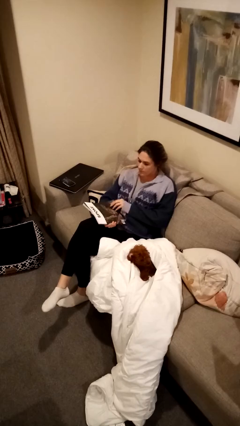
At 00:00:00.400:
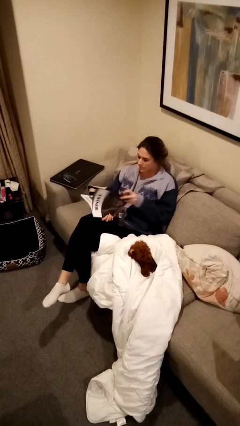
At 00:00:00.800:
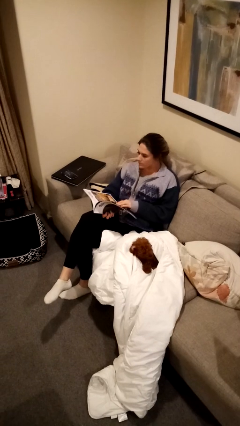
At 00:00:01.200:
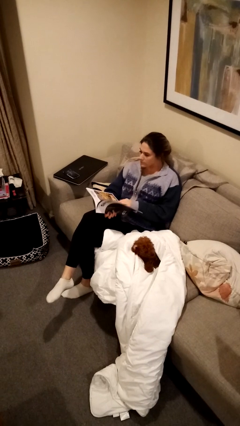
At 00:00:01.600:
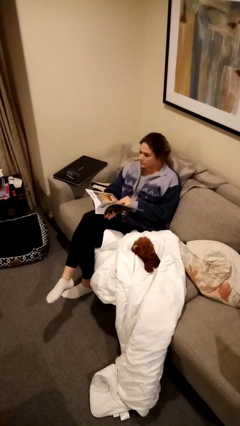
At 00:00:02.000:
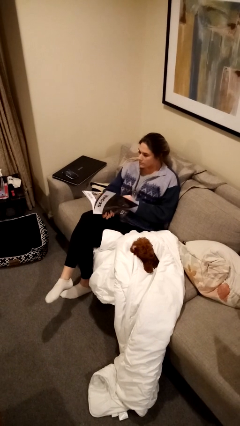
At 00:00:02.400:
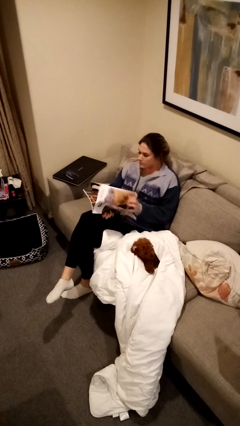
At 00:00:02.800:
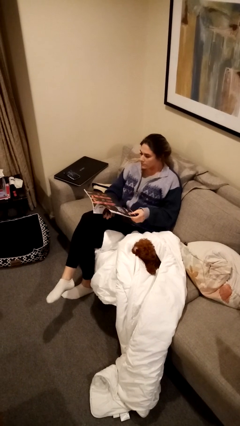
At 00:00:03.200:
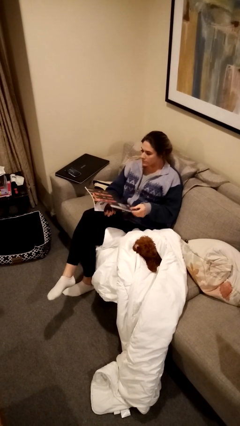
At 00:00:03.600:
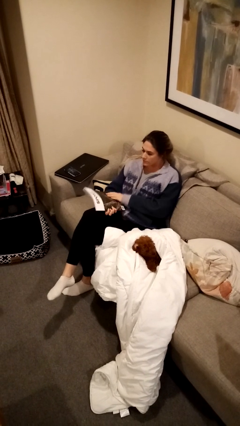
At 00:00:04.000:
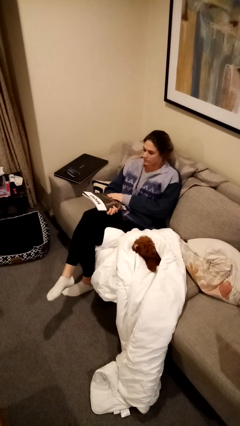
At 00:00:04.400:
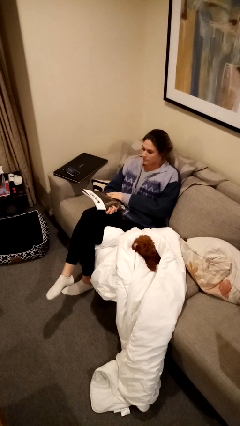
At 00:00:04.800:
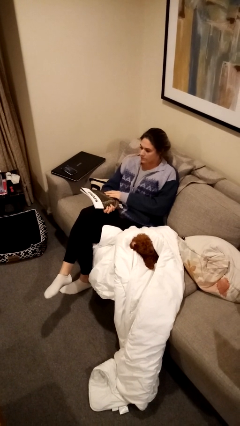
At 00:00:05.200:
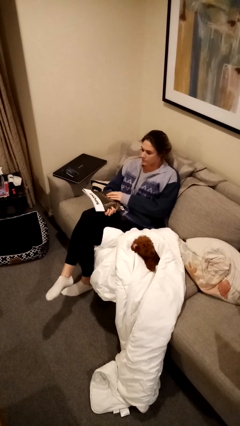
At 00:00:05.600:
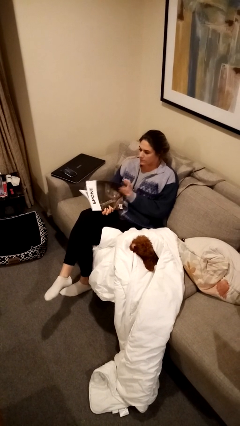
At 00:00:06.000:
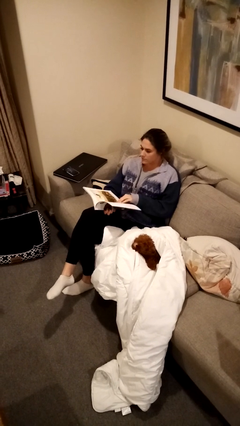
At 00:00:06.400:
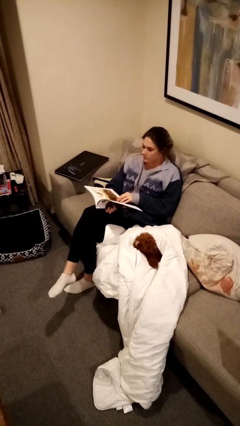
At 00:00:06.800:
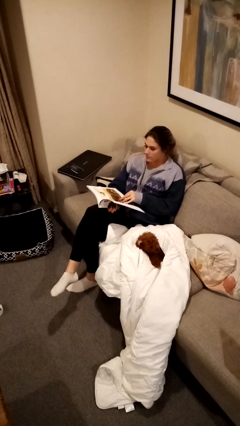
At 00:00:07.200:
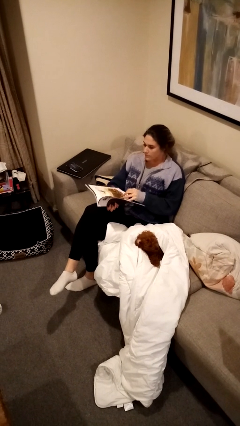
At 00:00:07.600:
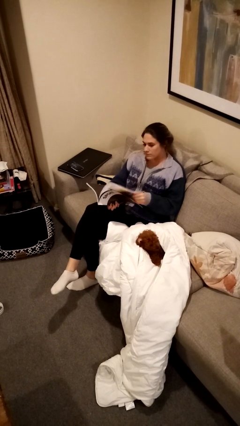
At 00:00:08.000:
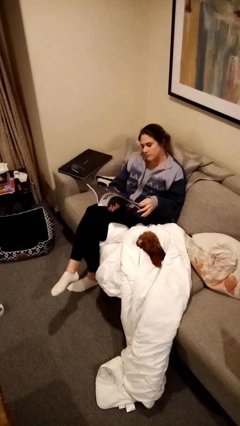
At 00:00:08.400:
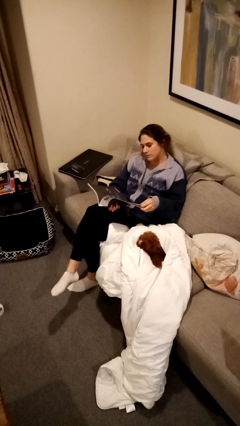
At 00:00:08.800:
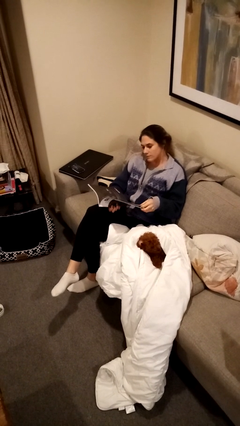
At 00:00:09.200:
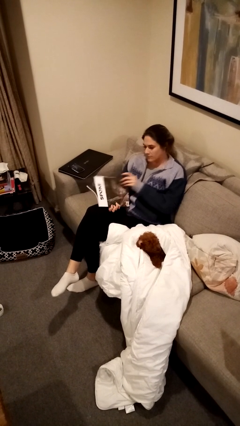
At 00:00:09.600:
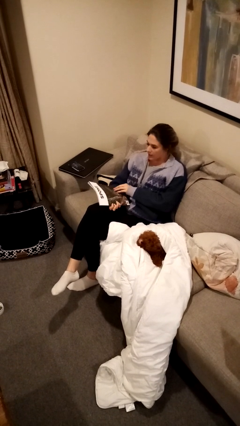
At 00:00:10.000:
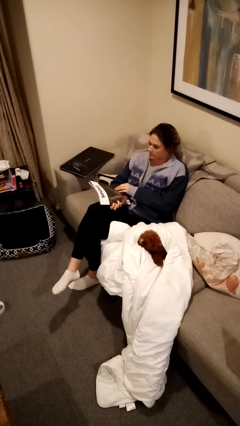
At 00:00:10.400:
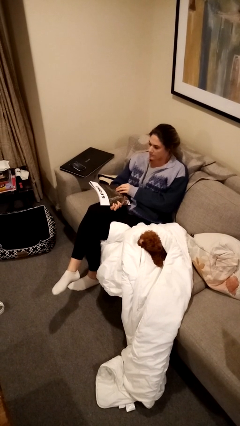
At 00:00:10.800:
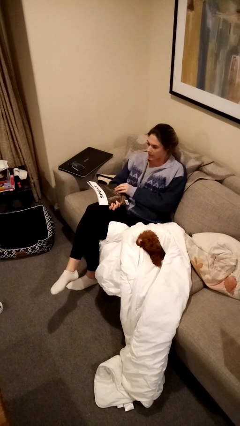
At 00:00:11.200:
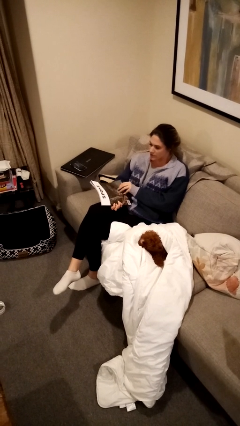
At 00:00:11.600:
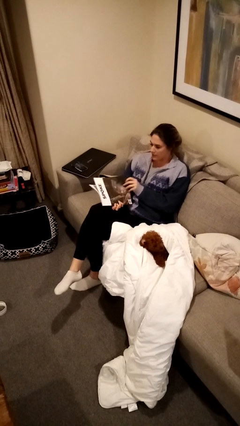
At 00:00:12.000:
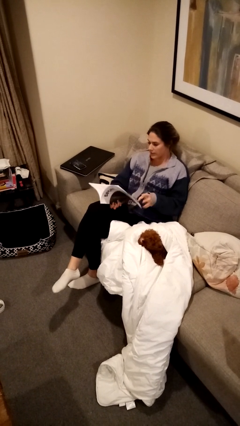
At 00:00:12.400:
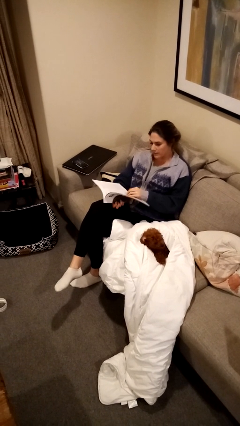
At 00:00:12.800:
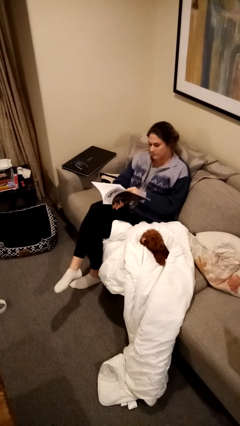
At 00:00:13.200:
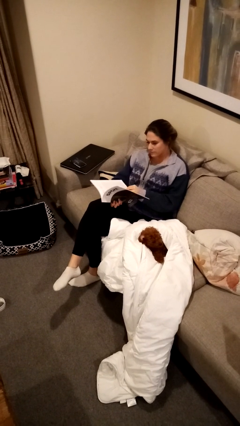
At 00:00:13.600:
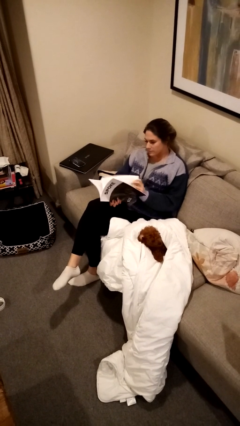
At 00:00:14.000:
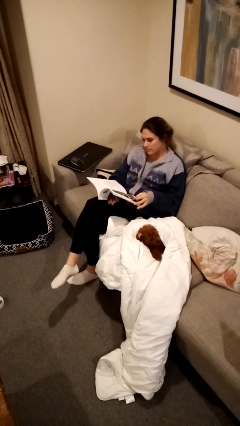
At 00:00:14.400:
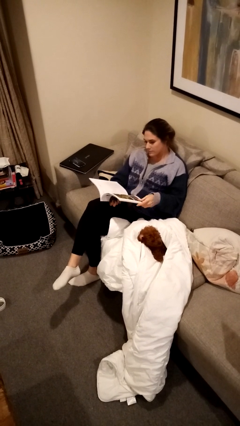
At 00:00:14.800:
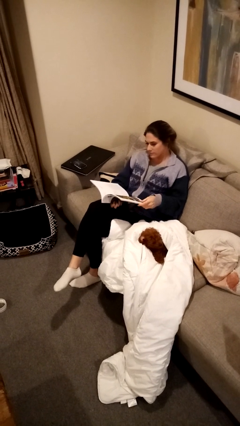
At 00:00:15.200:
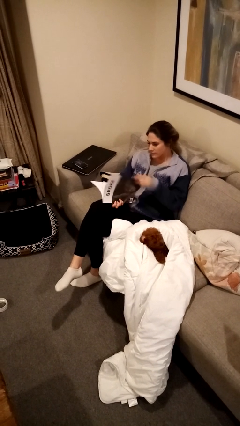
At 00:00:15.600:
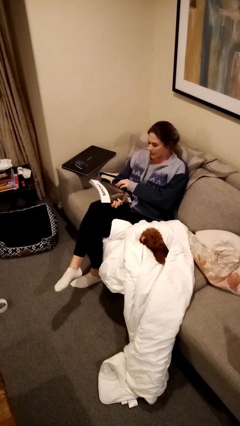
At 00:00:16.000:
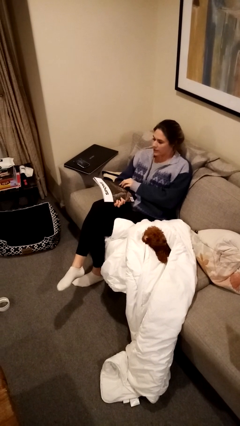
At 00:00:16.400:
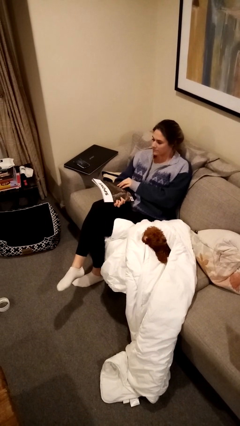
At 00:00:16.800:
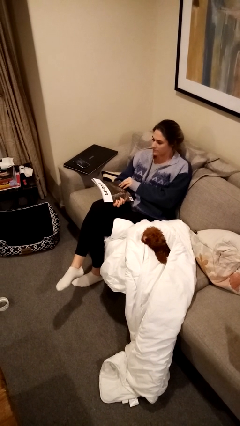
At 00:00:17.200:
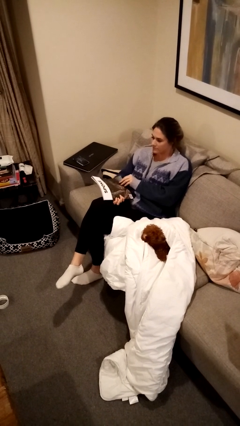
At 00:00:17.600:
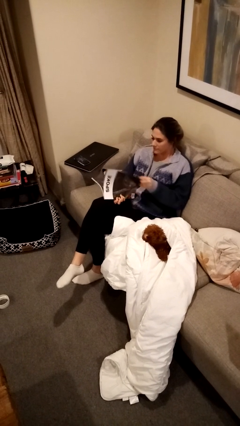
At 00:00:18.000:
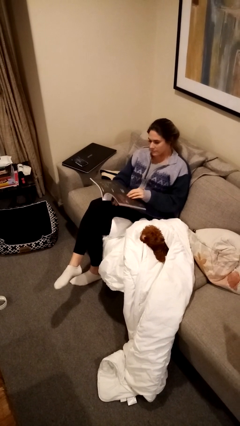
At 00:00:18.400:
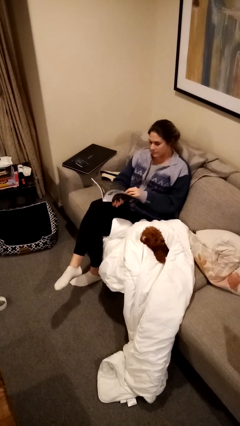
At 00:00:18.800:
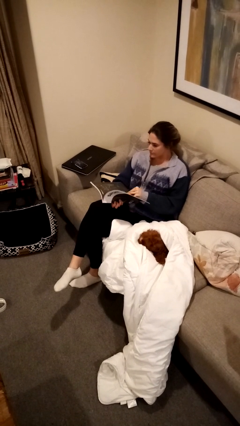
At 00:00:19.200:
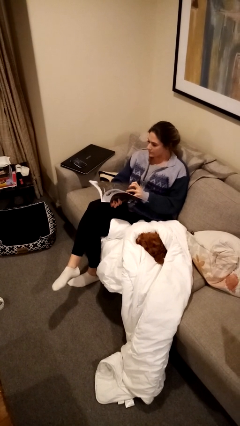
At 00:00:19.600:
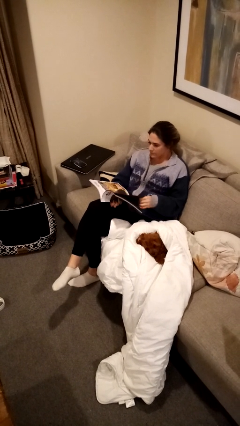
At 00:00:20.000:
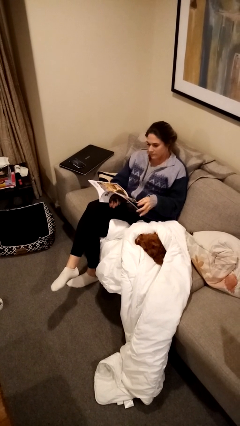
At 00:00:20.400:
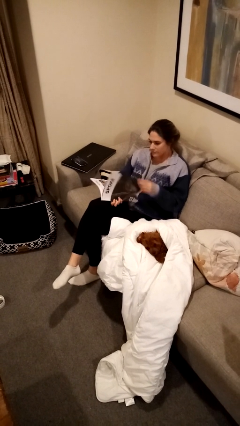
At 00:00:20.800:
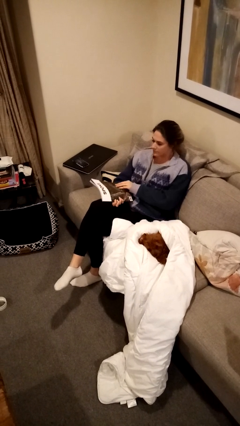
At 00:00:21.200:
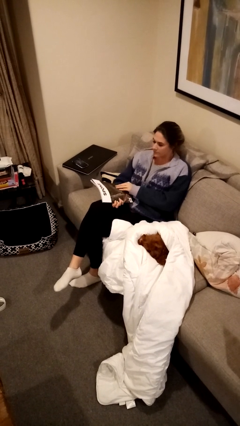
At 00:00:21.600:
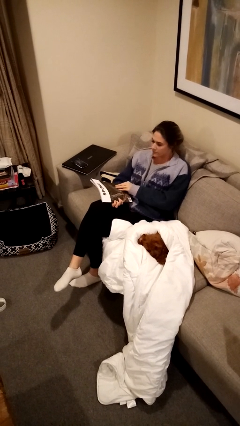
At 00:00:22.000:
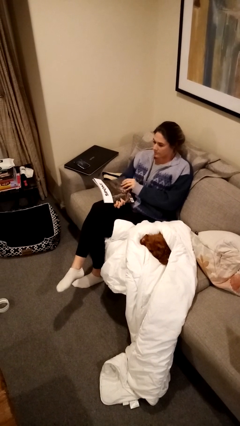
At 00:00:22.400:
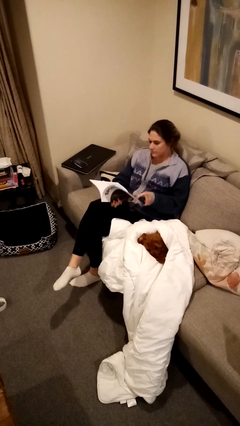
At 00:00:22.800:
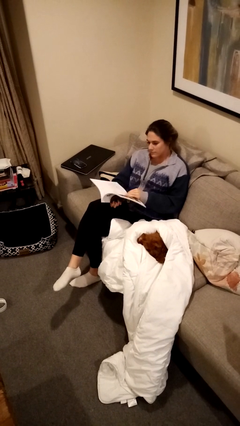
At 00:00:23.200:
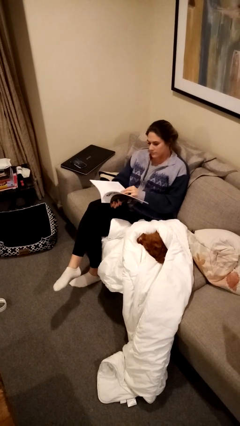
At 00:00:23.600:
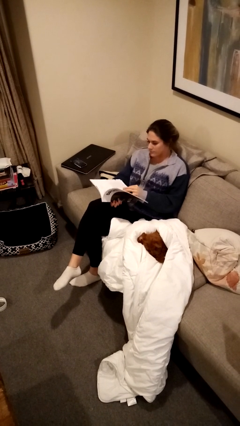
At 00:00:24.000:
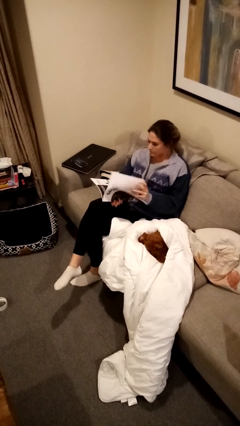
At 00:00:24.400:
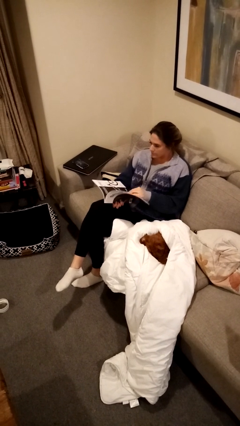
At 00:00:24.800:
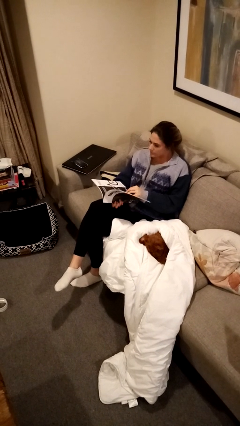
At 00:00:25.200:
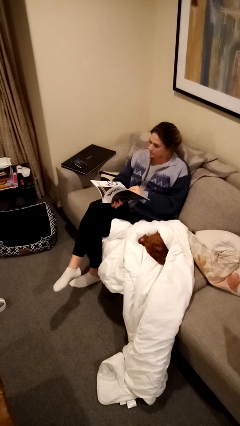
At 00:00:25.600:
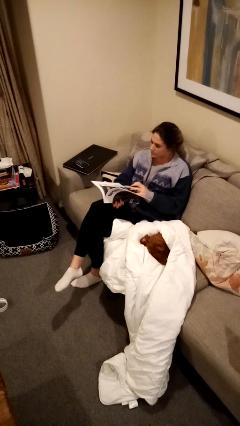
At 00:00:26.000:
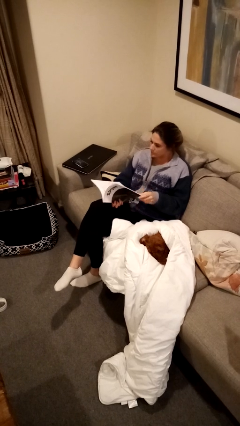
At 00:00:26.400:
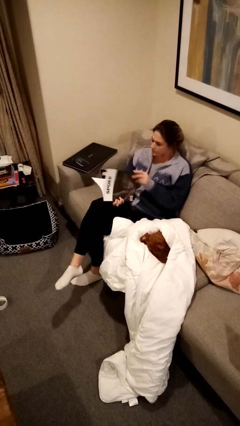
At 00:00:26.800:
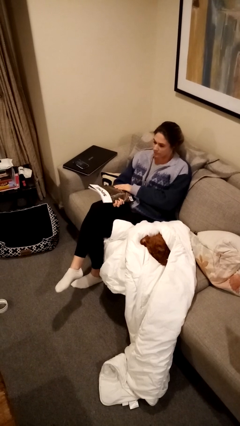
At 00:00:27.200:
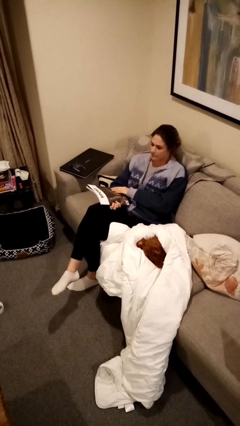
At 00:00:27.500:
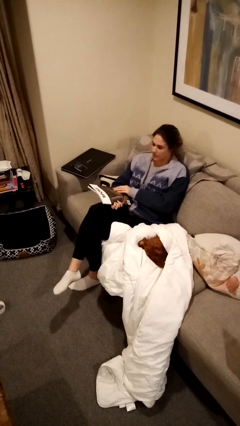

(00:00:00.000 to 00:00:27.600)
person reads magazine

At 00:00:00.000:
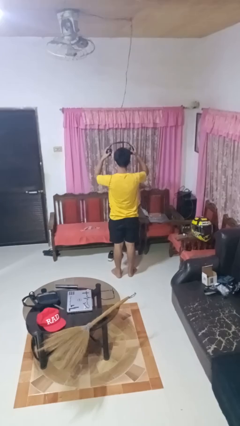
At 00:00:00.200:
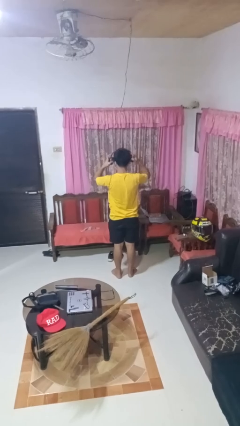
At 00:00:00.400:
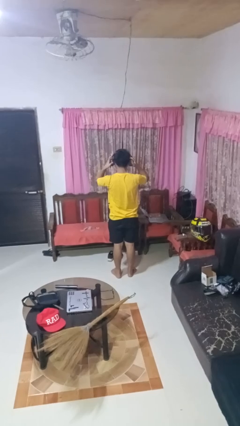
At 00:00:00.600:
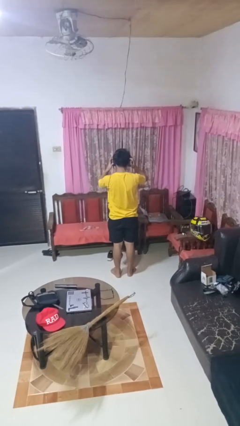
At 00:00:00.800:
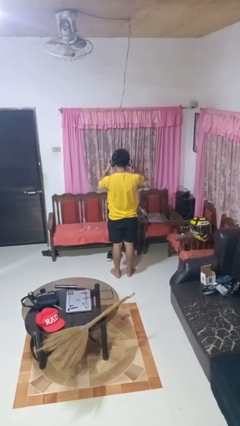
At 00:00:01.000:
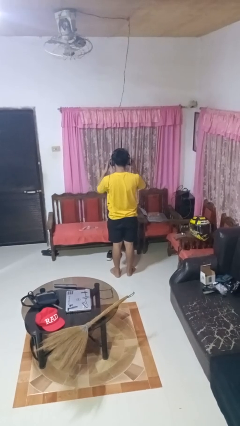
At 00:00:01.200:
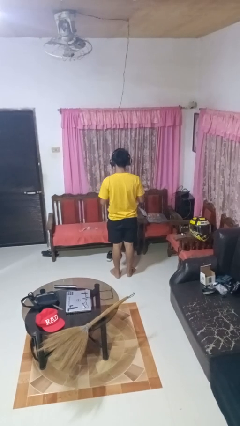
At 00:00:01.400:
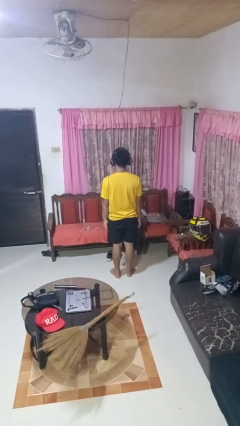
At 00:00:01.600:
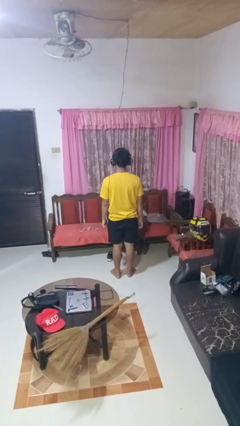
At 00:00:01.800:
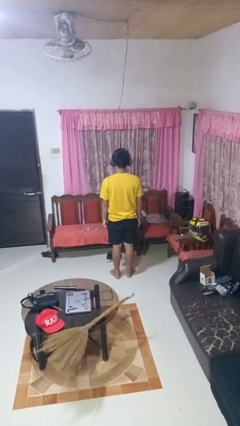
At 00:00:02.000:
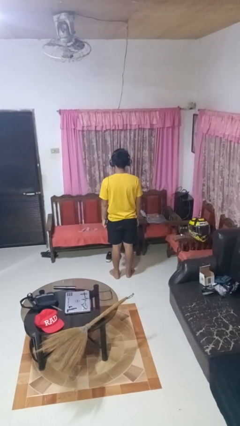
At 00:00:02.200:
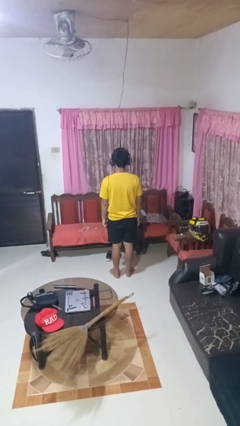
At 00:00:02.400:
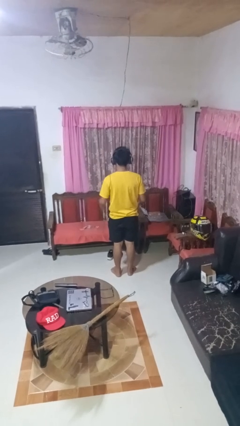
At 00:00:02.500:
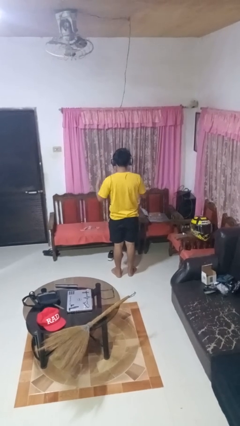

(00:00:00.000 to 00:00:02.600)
person puts on headphones

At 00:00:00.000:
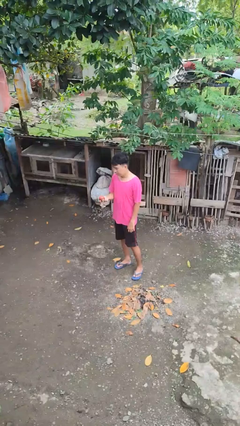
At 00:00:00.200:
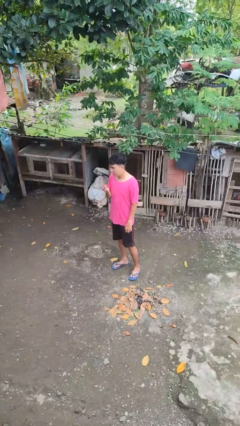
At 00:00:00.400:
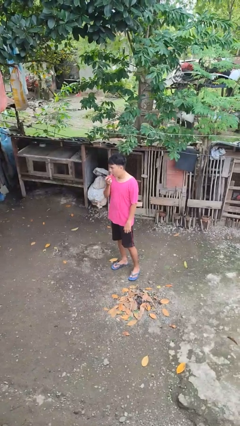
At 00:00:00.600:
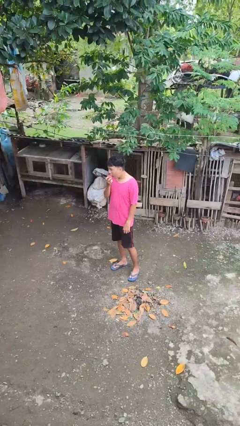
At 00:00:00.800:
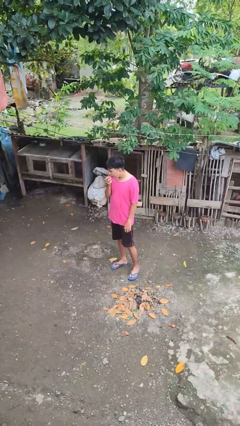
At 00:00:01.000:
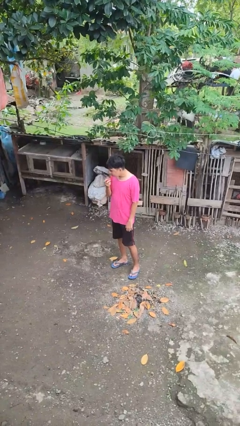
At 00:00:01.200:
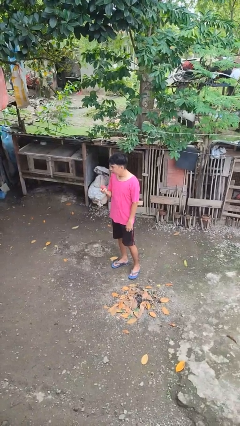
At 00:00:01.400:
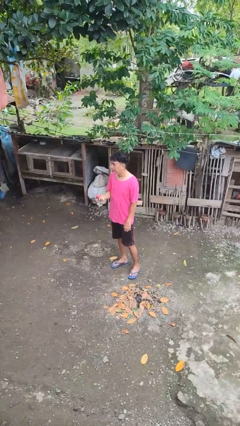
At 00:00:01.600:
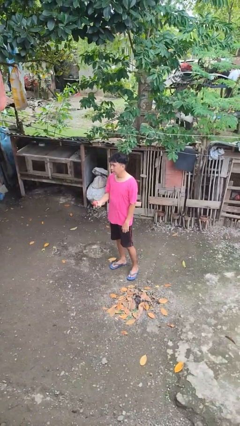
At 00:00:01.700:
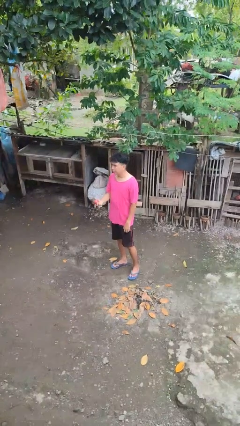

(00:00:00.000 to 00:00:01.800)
person eats apple
